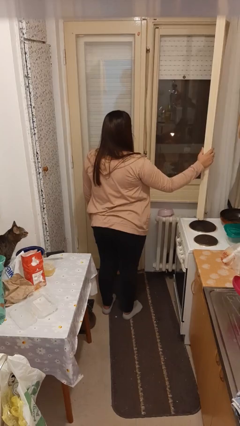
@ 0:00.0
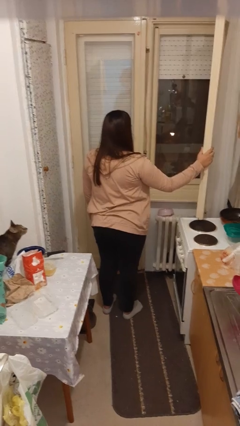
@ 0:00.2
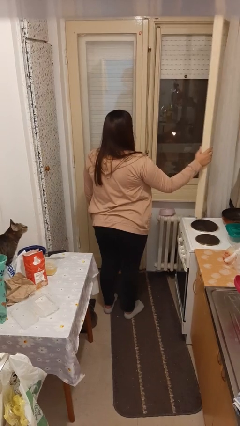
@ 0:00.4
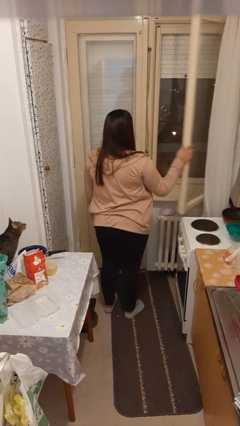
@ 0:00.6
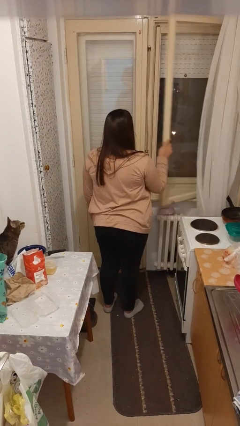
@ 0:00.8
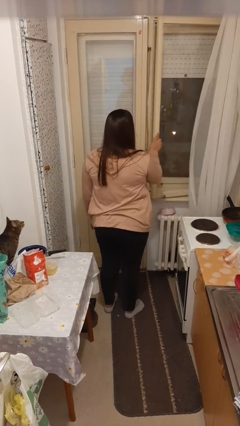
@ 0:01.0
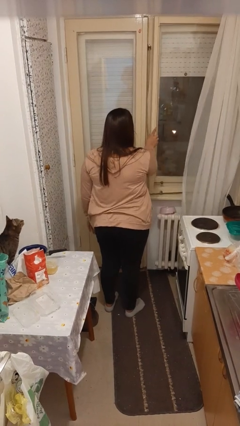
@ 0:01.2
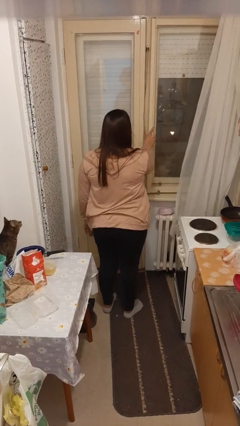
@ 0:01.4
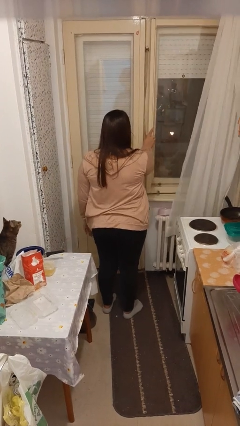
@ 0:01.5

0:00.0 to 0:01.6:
person closes home window

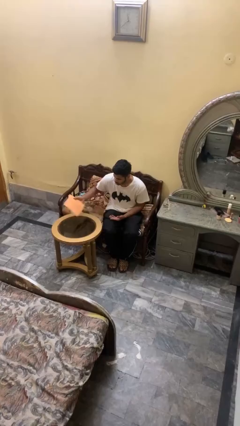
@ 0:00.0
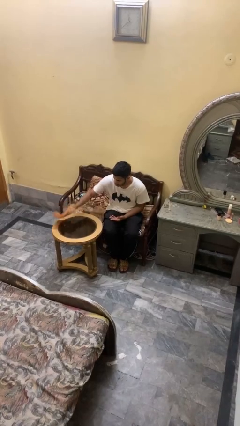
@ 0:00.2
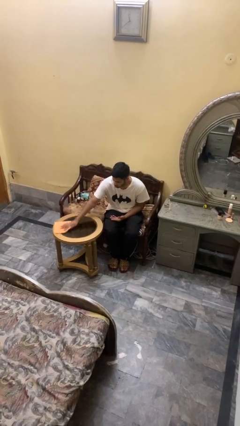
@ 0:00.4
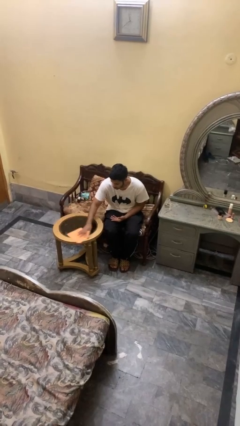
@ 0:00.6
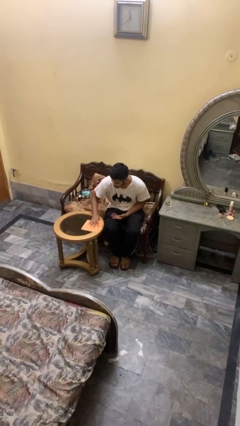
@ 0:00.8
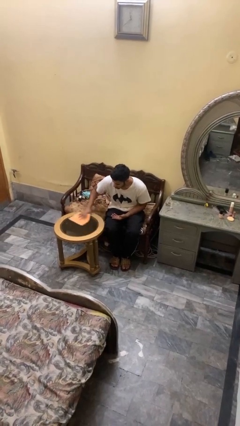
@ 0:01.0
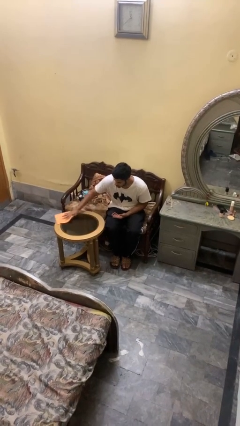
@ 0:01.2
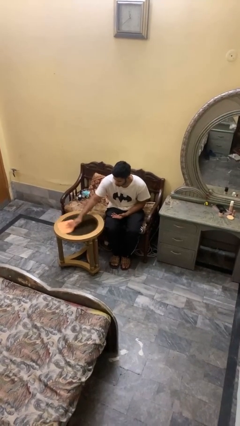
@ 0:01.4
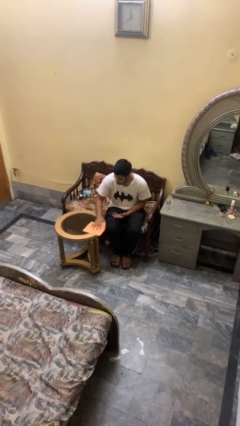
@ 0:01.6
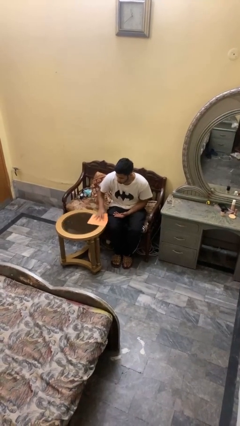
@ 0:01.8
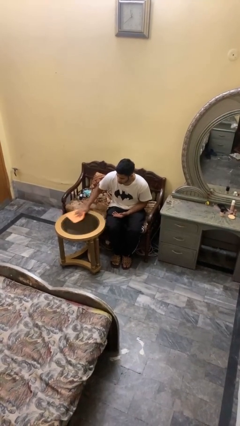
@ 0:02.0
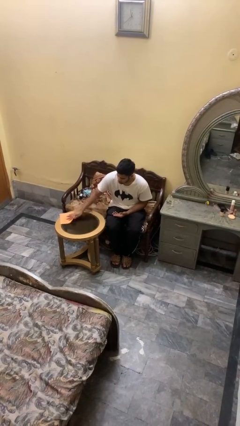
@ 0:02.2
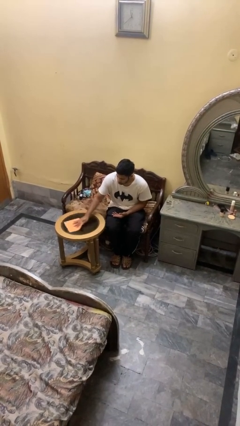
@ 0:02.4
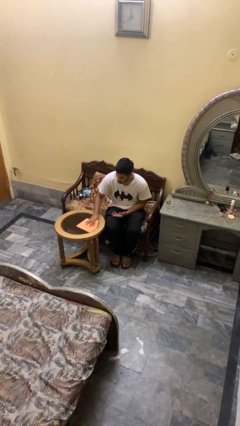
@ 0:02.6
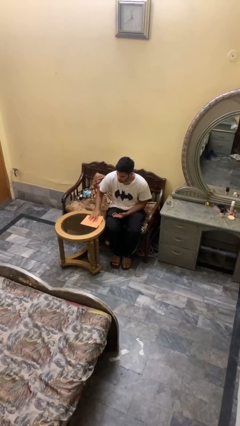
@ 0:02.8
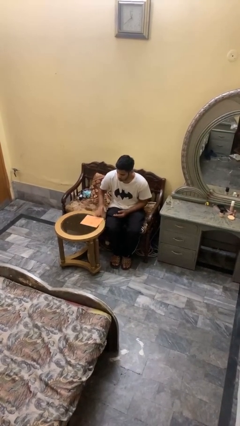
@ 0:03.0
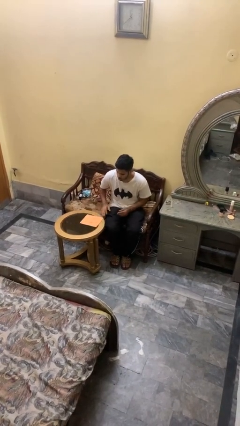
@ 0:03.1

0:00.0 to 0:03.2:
person cleans table with rag

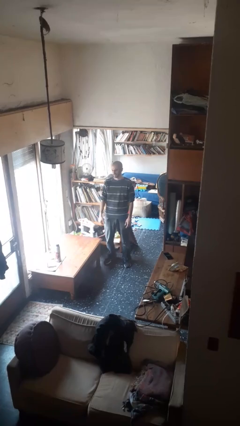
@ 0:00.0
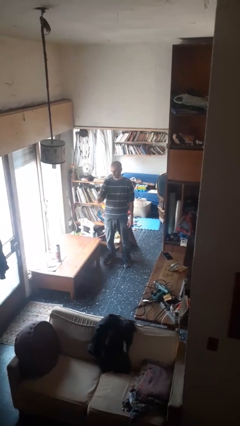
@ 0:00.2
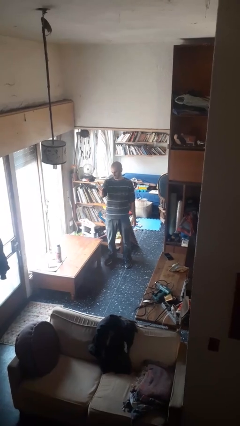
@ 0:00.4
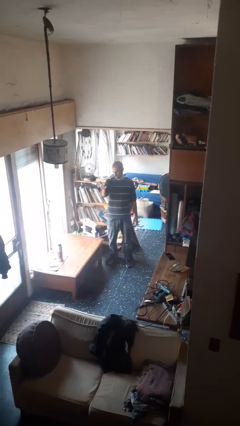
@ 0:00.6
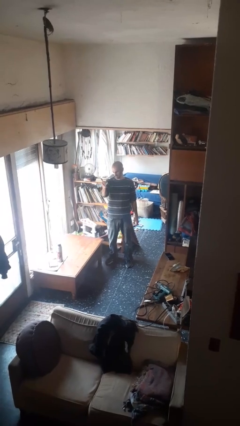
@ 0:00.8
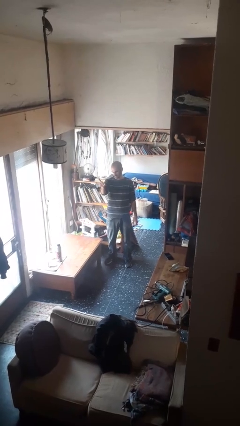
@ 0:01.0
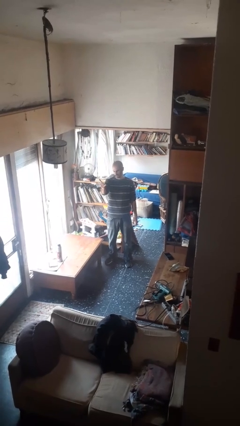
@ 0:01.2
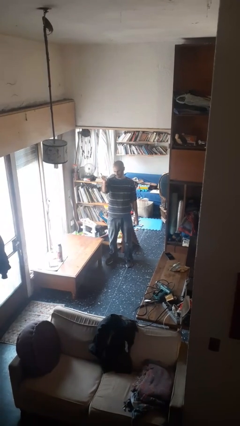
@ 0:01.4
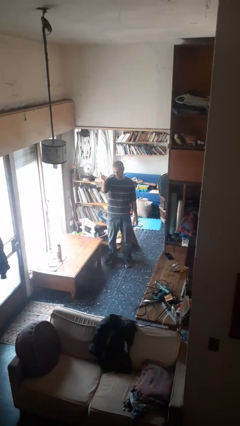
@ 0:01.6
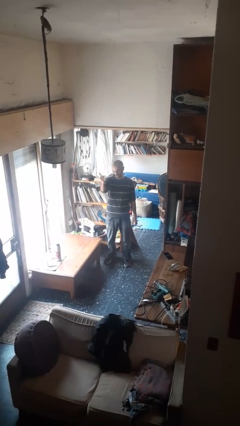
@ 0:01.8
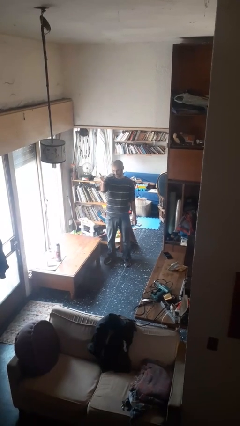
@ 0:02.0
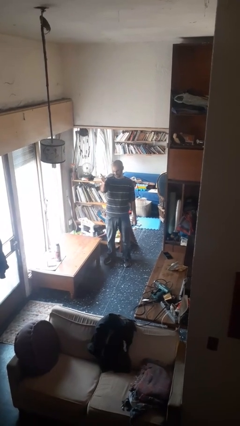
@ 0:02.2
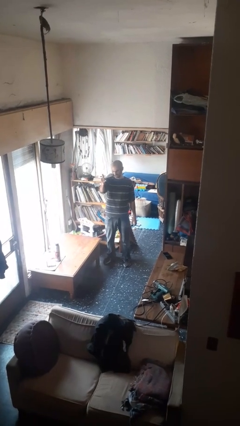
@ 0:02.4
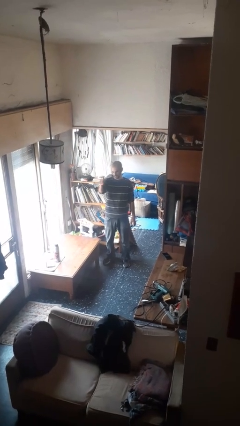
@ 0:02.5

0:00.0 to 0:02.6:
person gestures hang loose

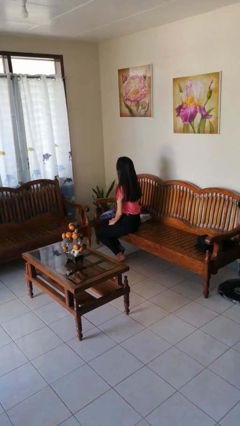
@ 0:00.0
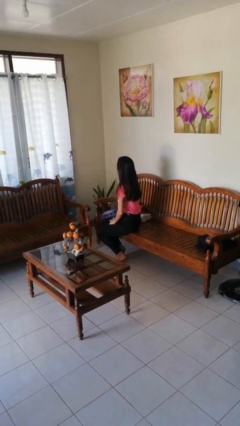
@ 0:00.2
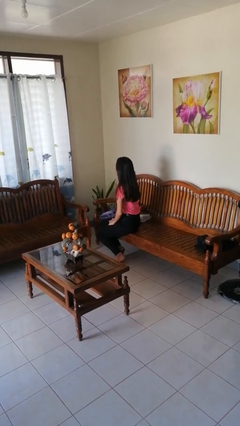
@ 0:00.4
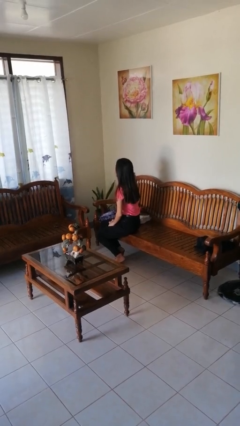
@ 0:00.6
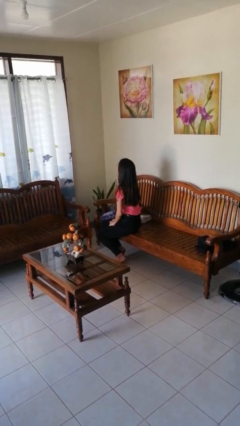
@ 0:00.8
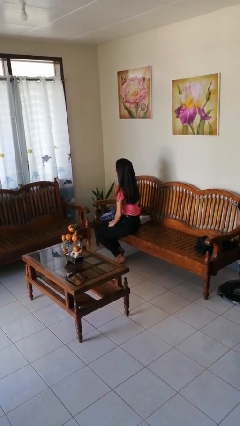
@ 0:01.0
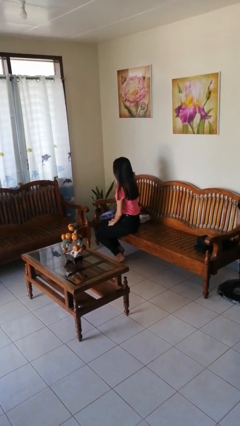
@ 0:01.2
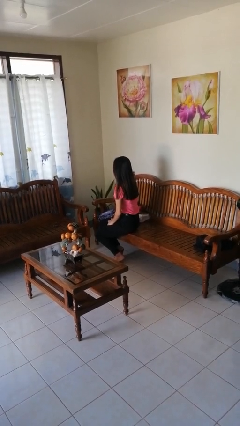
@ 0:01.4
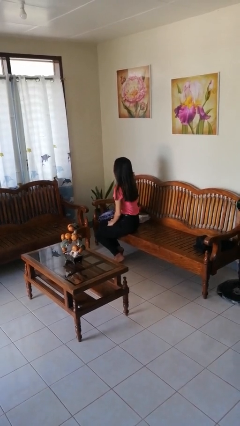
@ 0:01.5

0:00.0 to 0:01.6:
person nods head

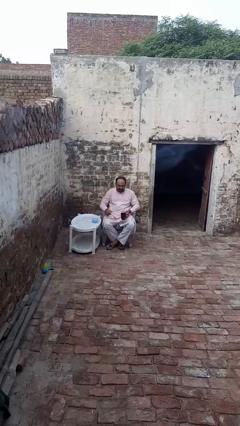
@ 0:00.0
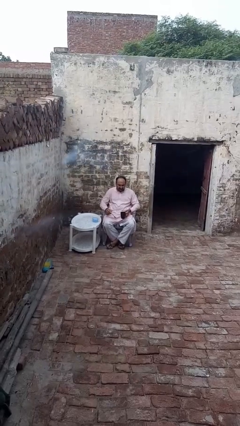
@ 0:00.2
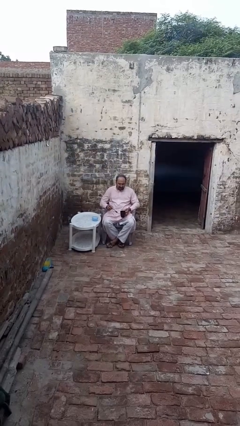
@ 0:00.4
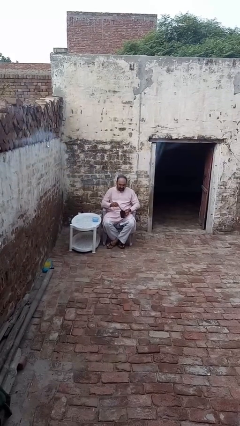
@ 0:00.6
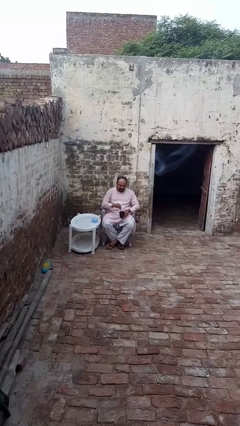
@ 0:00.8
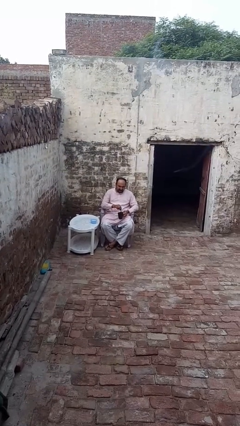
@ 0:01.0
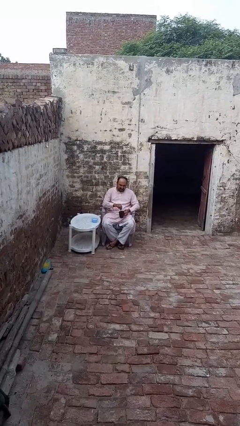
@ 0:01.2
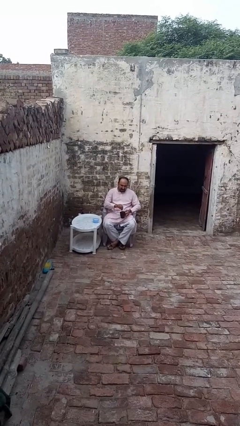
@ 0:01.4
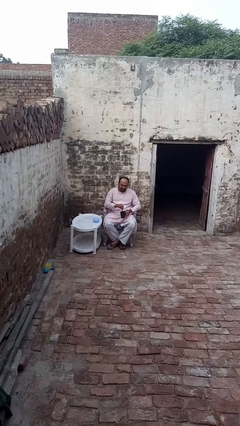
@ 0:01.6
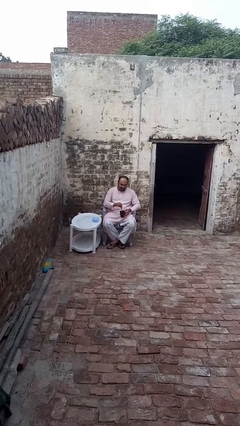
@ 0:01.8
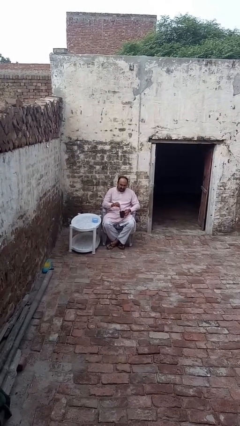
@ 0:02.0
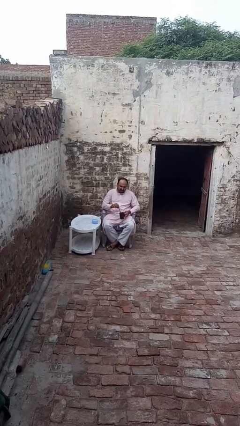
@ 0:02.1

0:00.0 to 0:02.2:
person stirs mug

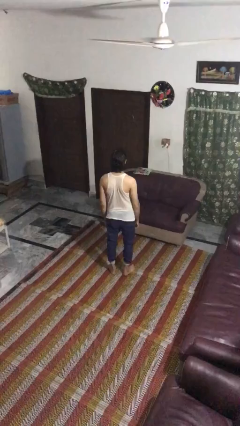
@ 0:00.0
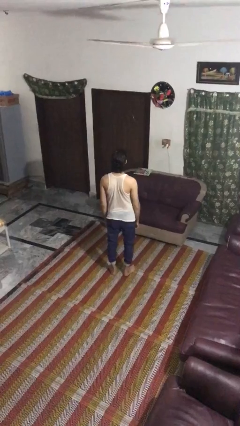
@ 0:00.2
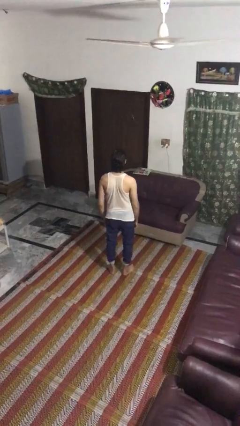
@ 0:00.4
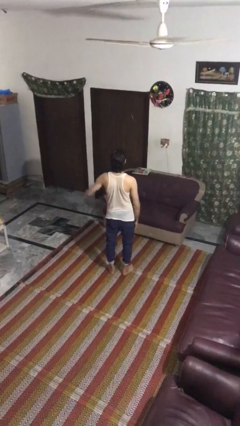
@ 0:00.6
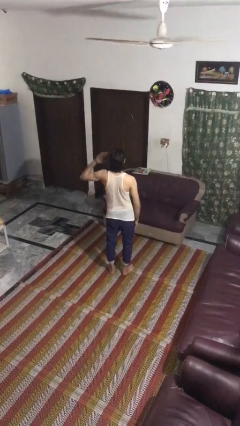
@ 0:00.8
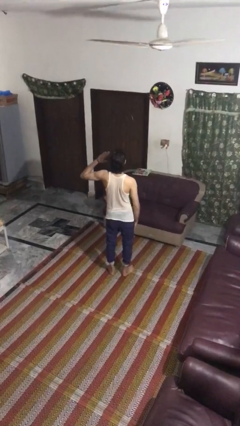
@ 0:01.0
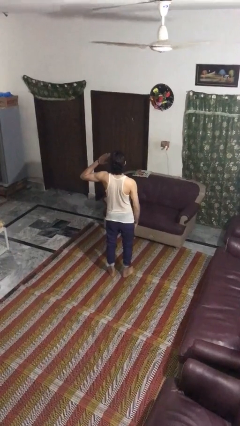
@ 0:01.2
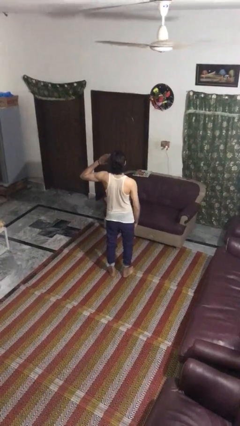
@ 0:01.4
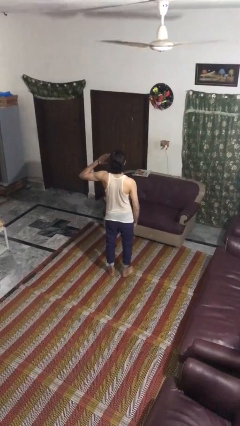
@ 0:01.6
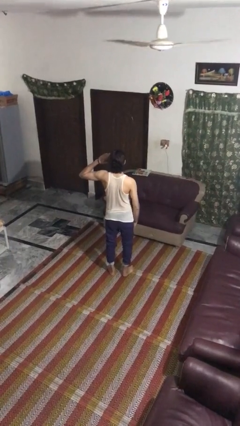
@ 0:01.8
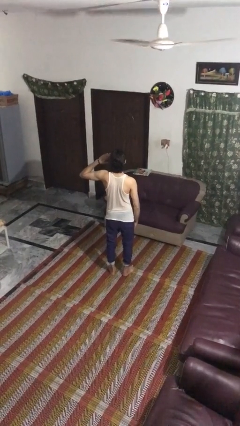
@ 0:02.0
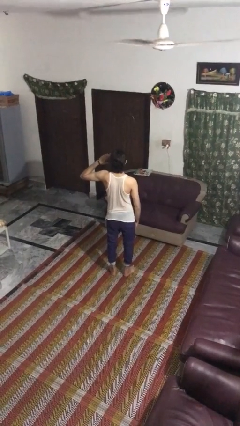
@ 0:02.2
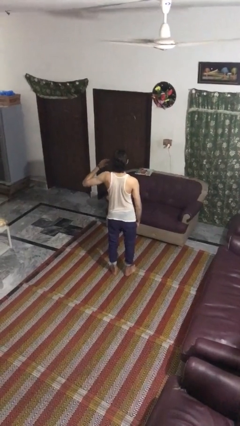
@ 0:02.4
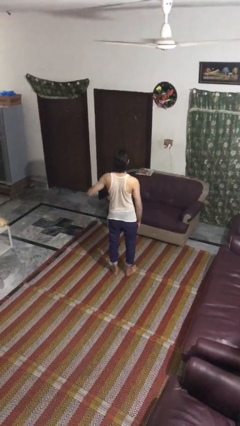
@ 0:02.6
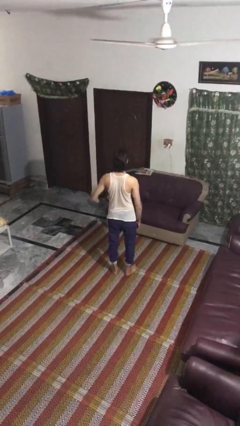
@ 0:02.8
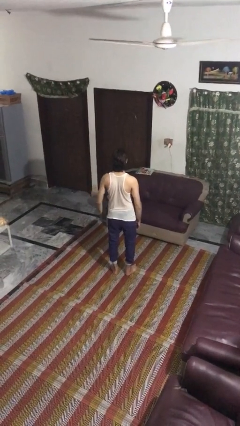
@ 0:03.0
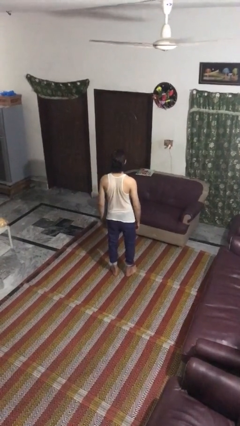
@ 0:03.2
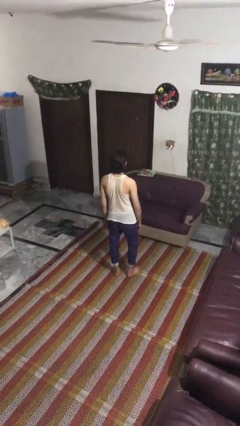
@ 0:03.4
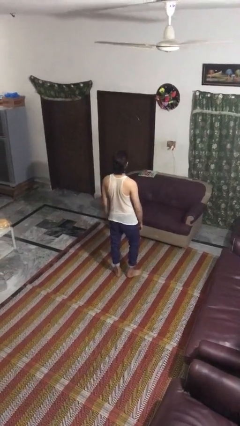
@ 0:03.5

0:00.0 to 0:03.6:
person salutes

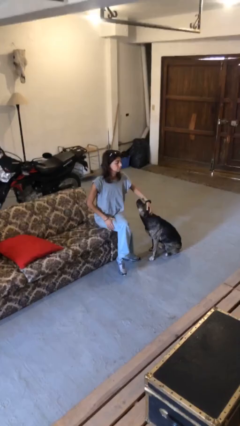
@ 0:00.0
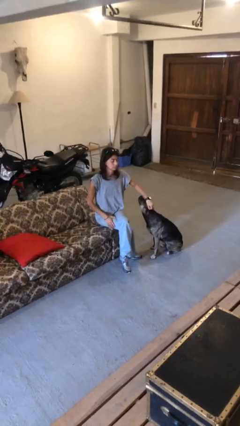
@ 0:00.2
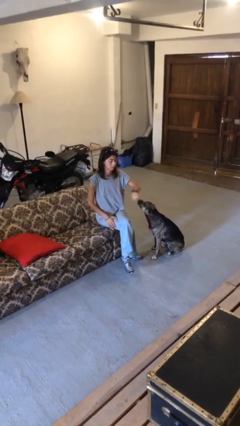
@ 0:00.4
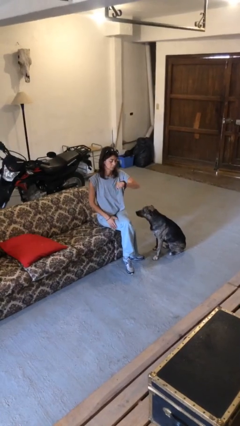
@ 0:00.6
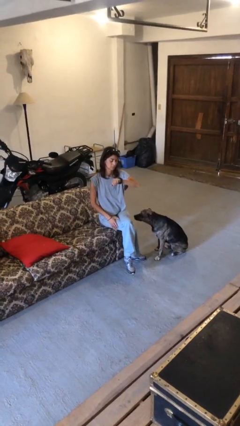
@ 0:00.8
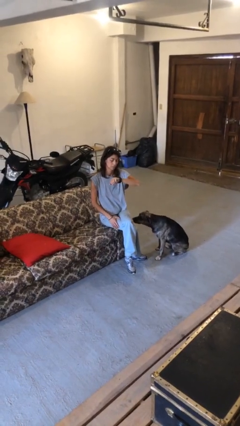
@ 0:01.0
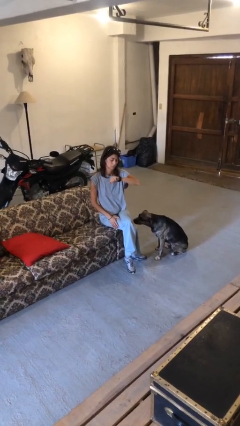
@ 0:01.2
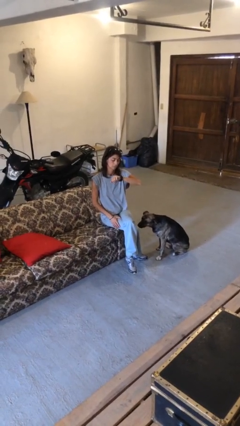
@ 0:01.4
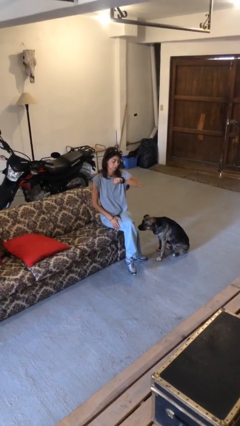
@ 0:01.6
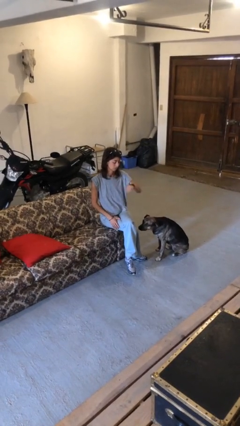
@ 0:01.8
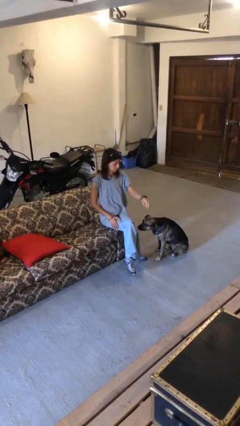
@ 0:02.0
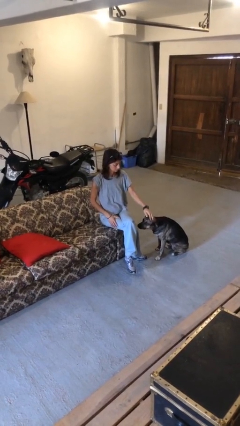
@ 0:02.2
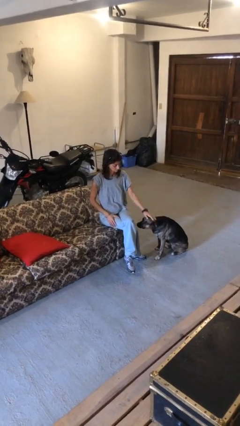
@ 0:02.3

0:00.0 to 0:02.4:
person looks at wristwatch
